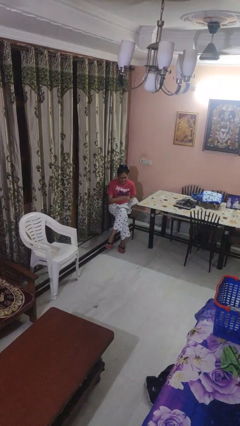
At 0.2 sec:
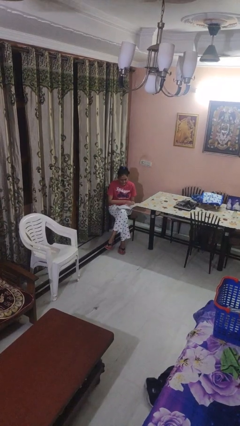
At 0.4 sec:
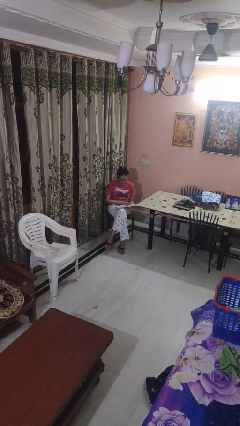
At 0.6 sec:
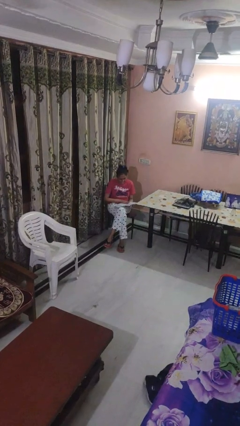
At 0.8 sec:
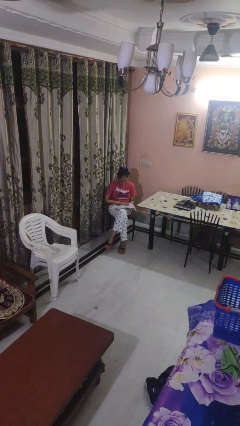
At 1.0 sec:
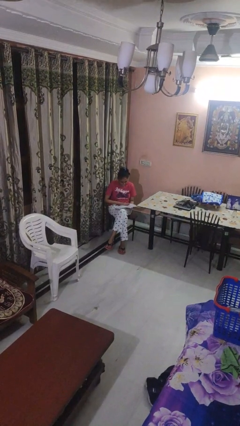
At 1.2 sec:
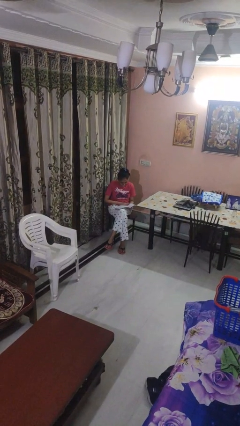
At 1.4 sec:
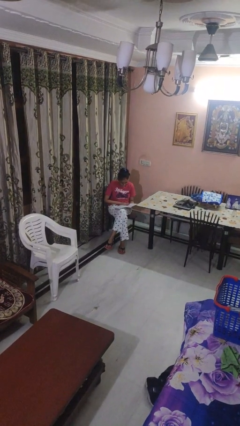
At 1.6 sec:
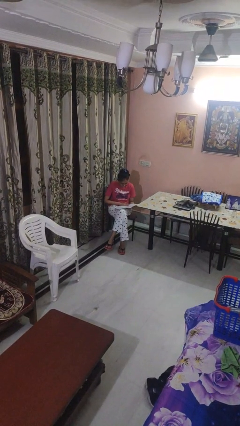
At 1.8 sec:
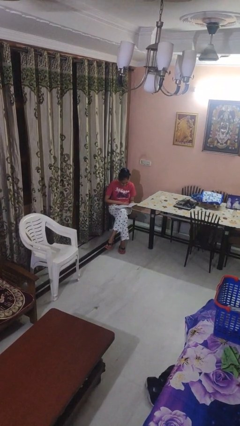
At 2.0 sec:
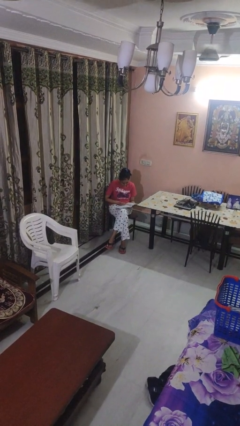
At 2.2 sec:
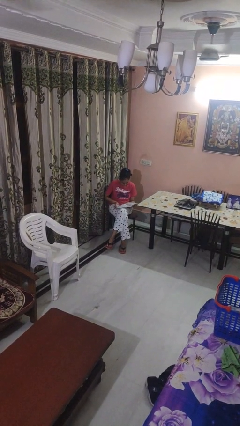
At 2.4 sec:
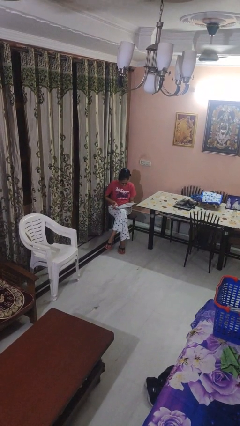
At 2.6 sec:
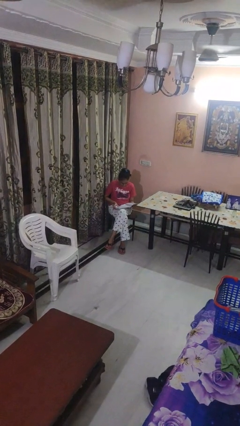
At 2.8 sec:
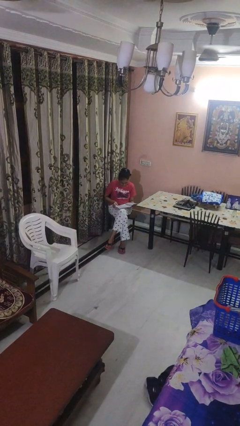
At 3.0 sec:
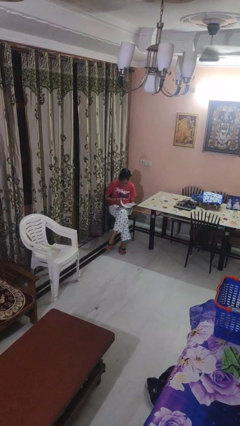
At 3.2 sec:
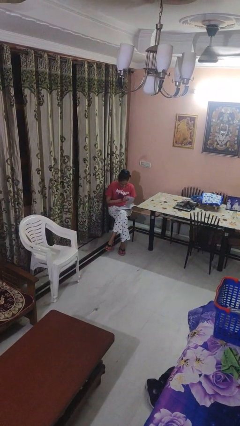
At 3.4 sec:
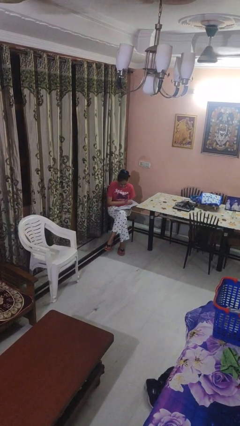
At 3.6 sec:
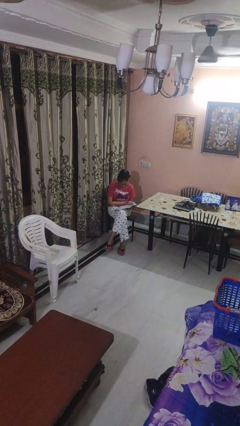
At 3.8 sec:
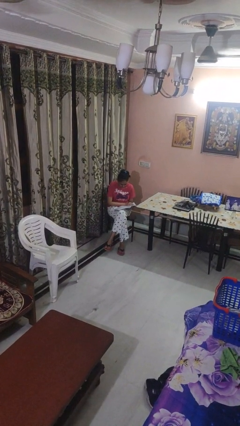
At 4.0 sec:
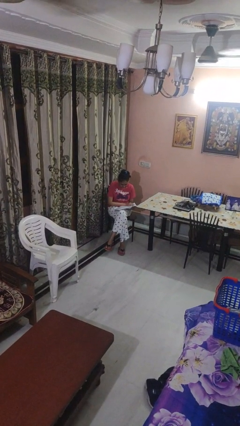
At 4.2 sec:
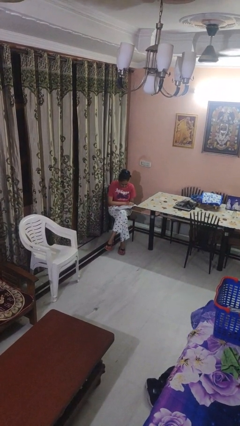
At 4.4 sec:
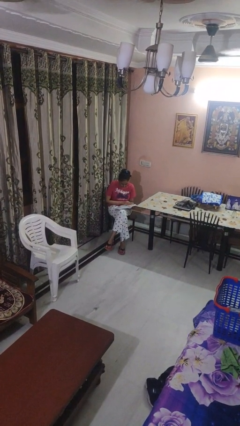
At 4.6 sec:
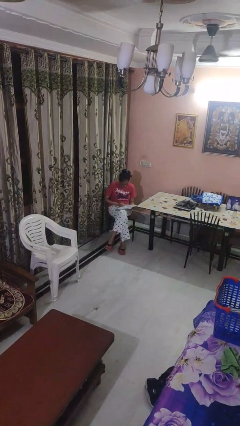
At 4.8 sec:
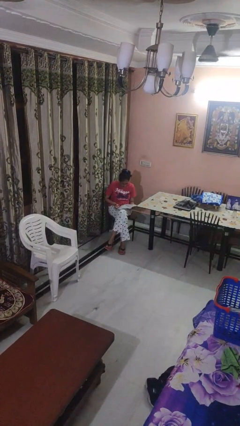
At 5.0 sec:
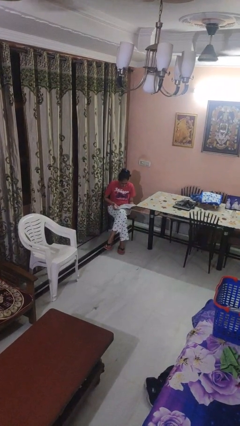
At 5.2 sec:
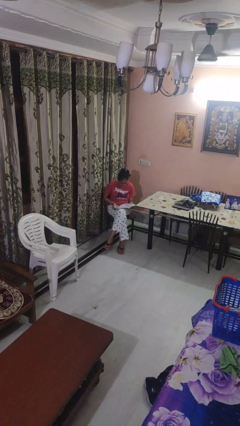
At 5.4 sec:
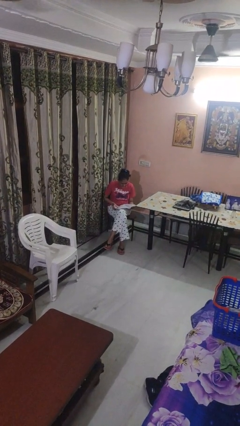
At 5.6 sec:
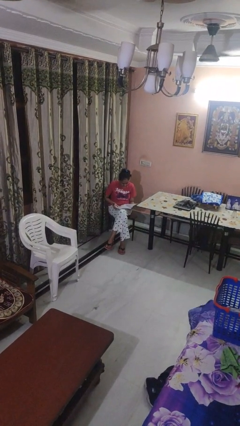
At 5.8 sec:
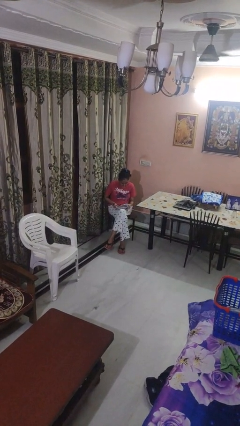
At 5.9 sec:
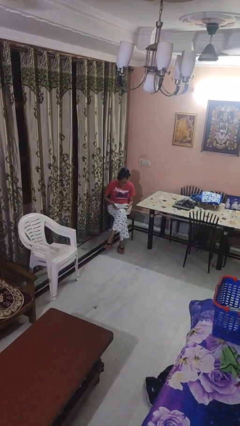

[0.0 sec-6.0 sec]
person reads magazine

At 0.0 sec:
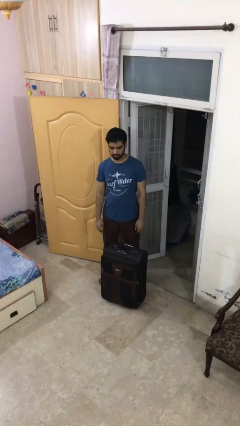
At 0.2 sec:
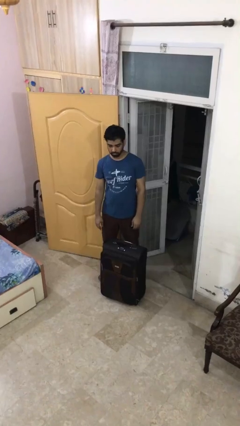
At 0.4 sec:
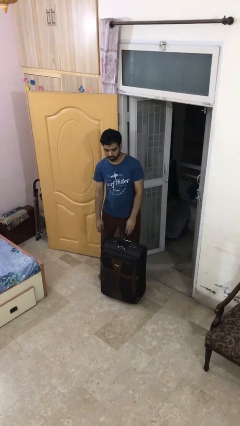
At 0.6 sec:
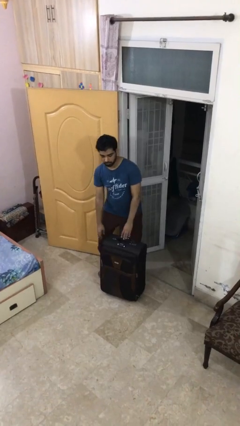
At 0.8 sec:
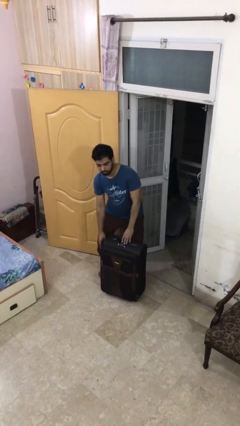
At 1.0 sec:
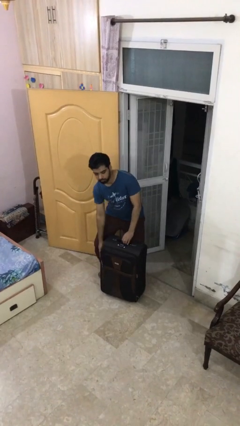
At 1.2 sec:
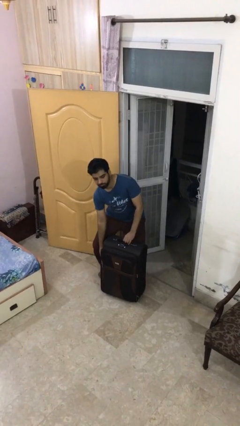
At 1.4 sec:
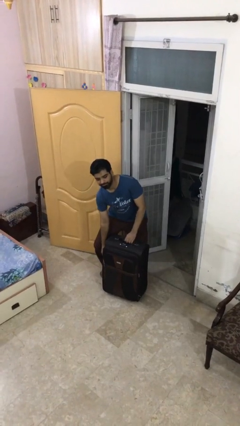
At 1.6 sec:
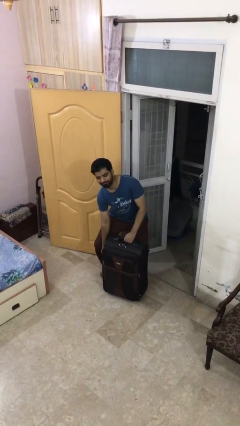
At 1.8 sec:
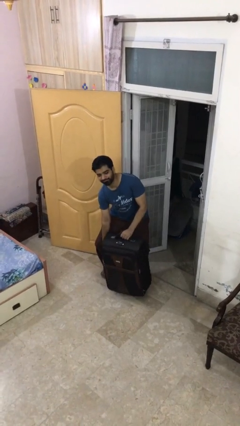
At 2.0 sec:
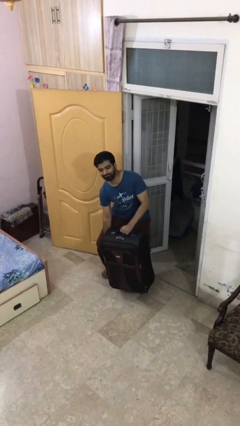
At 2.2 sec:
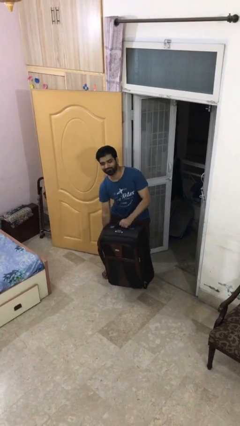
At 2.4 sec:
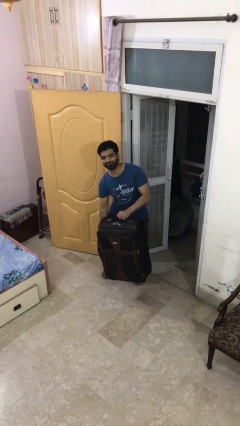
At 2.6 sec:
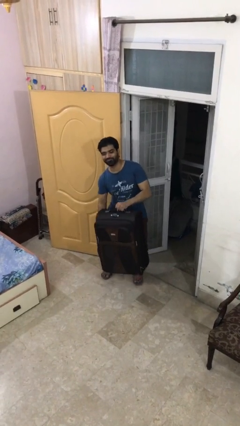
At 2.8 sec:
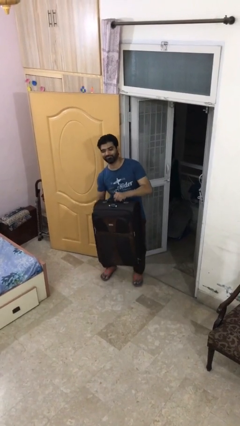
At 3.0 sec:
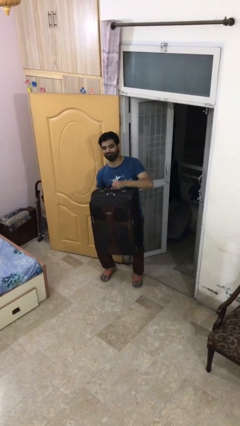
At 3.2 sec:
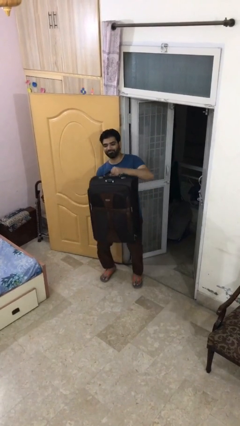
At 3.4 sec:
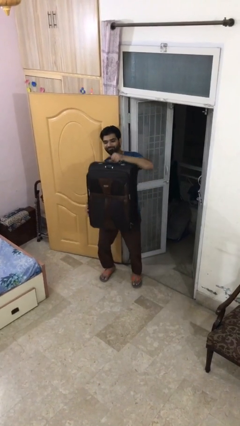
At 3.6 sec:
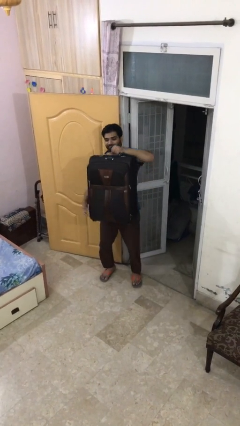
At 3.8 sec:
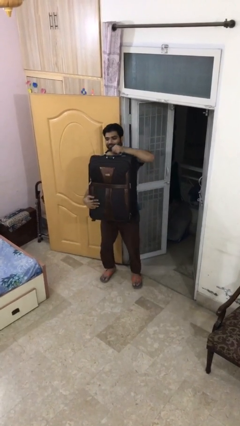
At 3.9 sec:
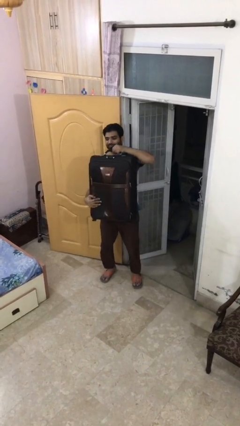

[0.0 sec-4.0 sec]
person picks up object from floor

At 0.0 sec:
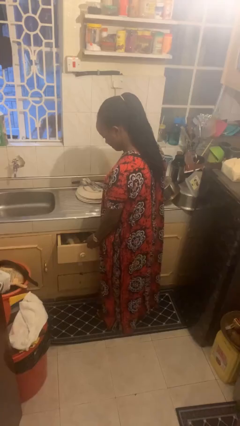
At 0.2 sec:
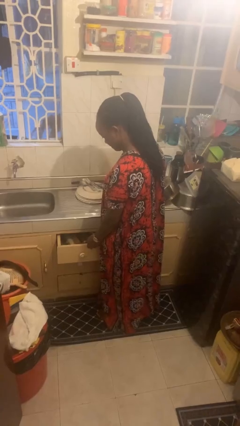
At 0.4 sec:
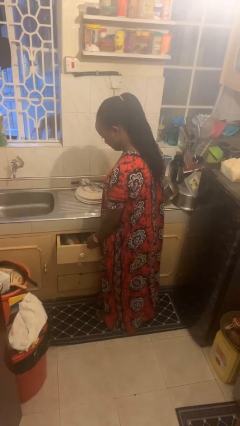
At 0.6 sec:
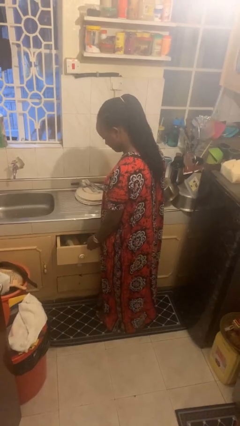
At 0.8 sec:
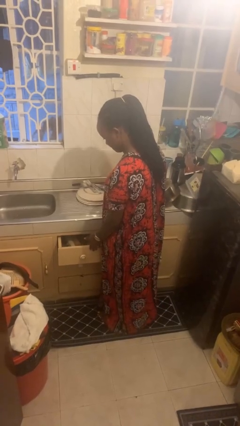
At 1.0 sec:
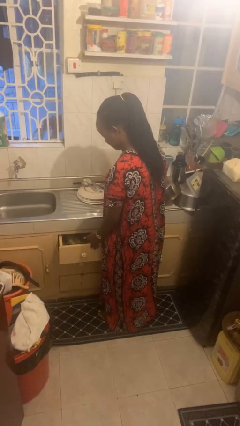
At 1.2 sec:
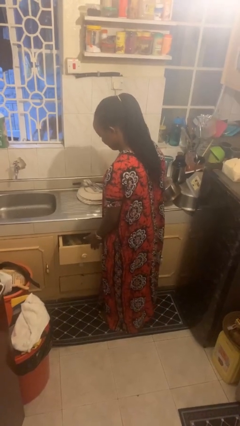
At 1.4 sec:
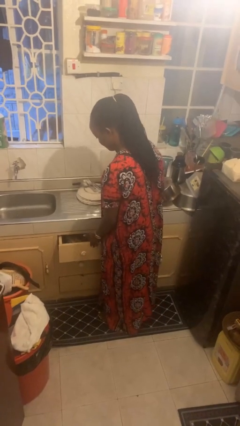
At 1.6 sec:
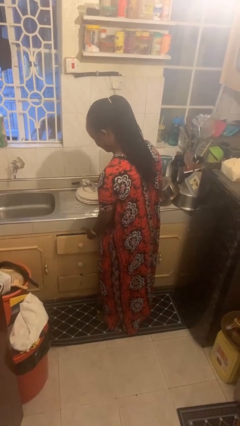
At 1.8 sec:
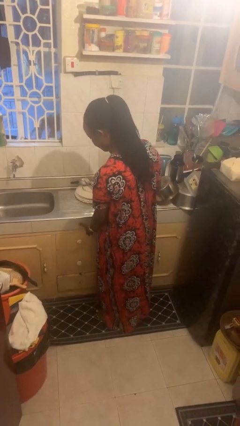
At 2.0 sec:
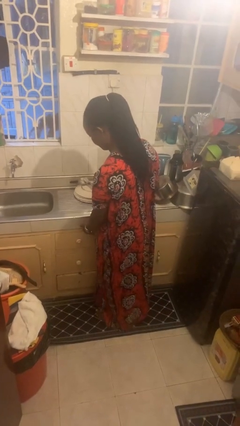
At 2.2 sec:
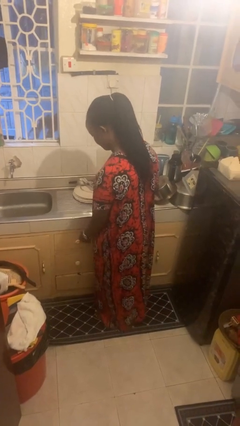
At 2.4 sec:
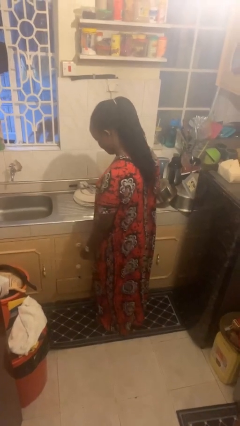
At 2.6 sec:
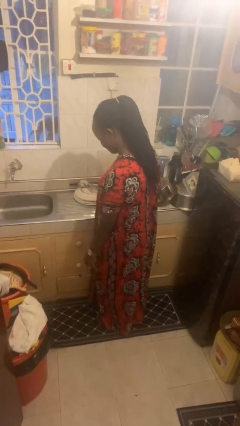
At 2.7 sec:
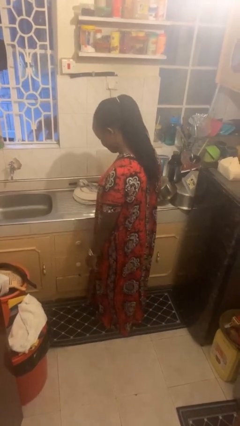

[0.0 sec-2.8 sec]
person closes kitchen drawer

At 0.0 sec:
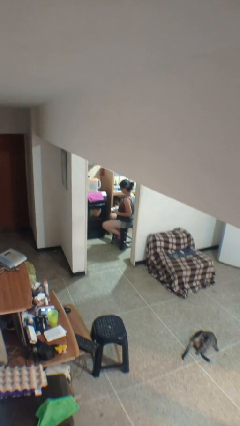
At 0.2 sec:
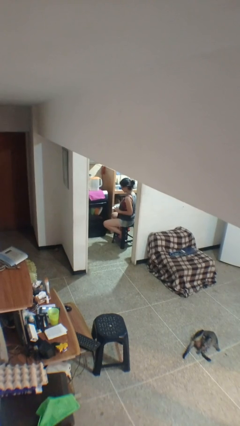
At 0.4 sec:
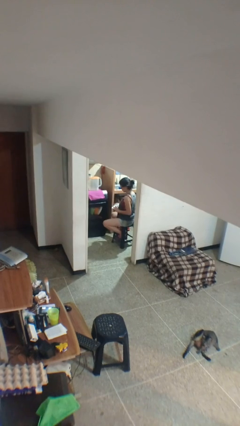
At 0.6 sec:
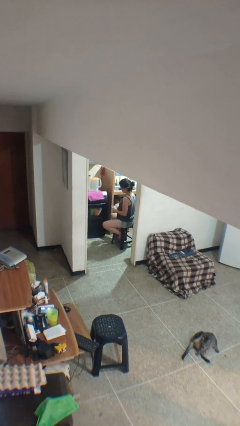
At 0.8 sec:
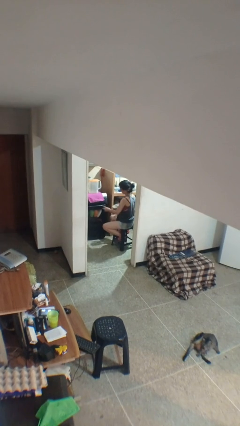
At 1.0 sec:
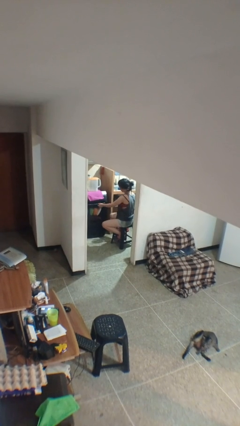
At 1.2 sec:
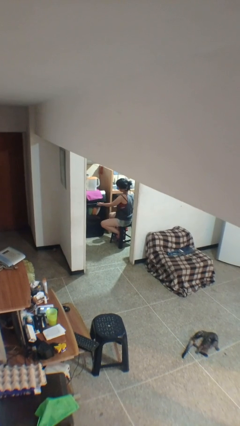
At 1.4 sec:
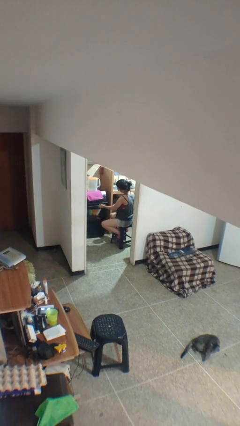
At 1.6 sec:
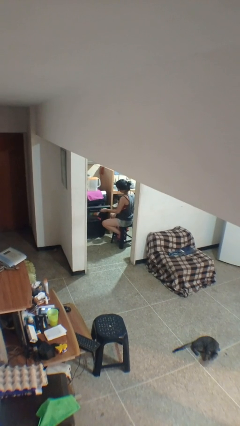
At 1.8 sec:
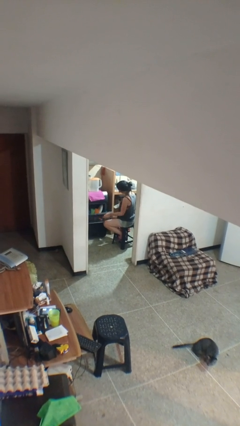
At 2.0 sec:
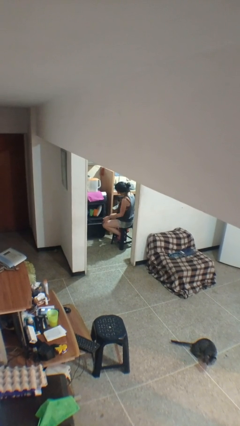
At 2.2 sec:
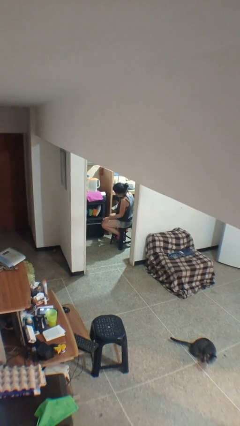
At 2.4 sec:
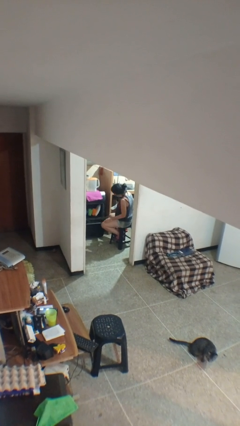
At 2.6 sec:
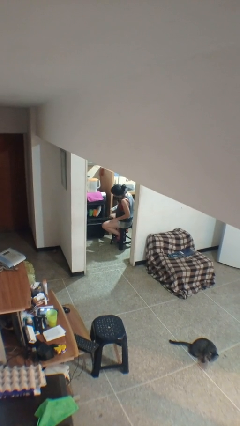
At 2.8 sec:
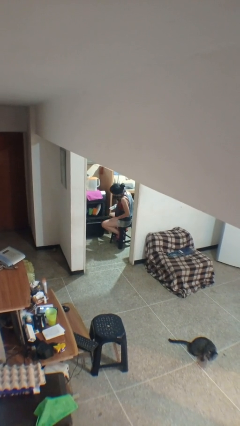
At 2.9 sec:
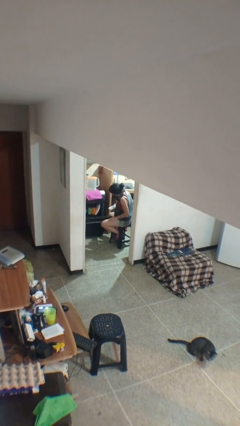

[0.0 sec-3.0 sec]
person opens dishwasher

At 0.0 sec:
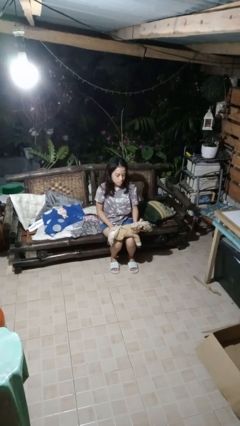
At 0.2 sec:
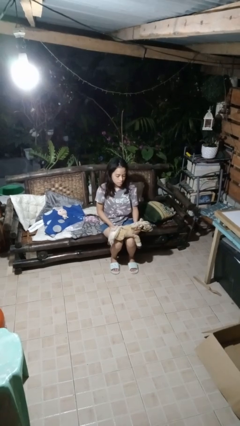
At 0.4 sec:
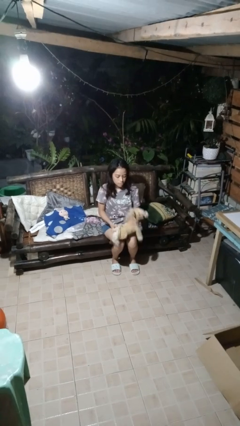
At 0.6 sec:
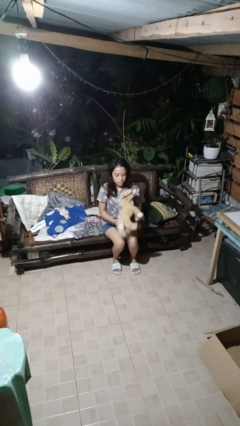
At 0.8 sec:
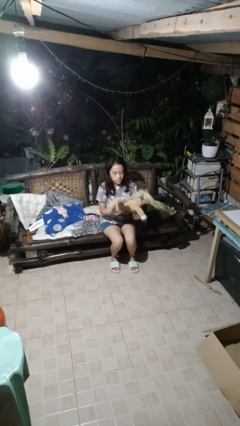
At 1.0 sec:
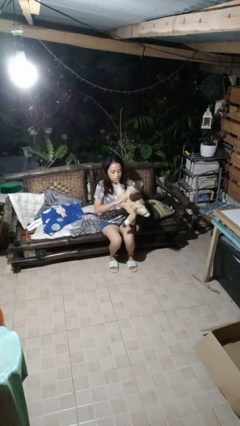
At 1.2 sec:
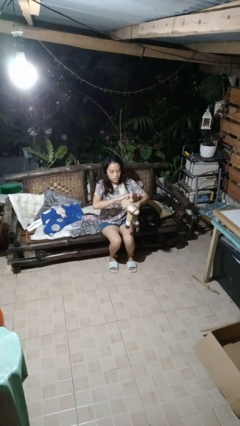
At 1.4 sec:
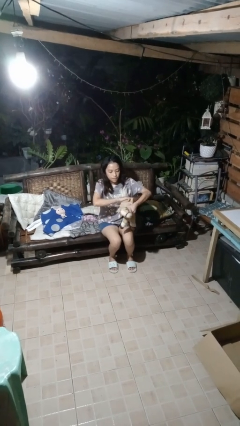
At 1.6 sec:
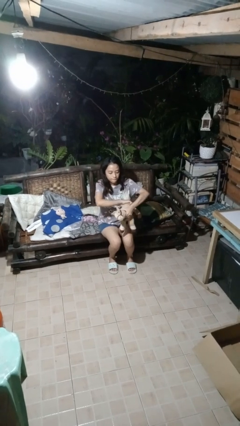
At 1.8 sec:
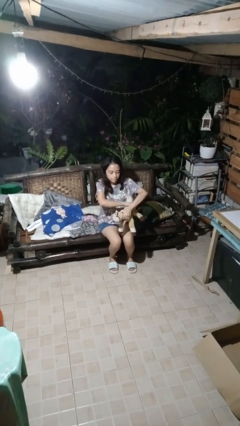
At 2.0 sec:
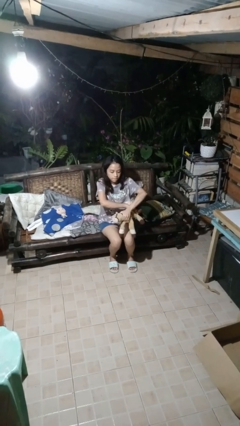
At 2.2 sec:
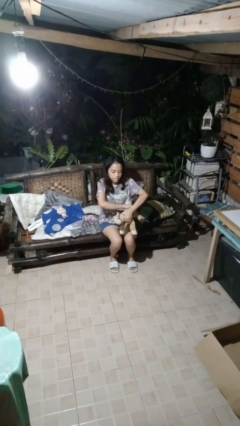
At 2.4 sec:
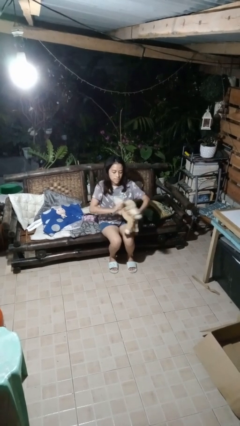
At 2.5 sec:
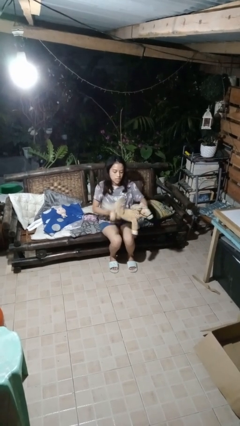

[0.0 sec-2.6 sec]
person squeezes object
